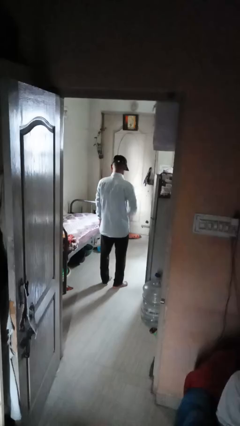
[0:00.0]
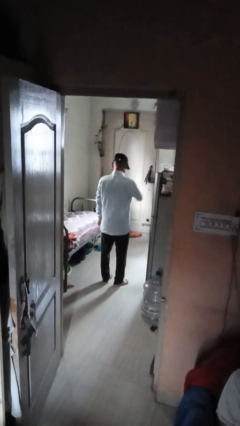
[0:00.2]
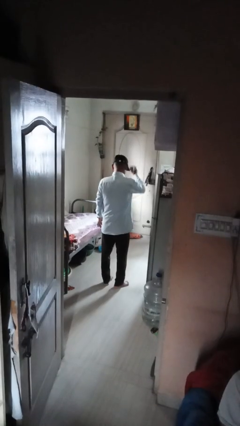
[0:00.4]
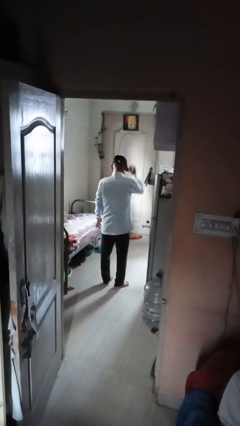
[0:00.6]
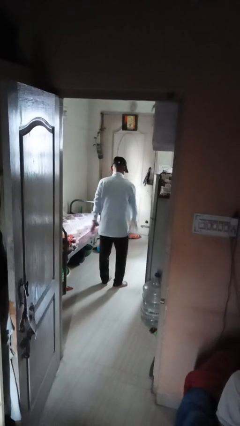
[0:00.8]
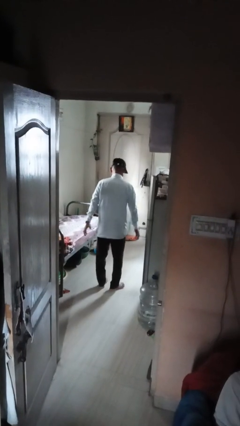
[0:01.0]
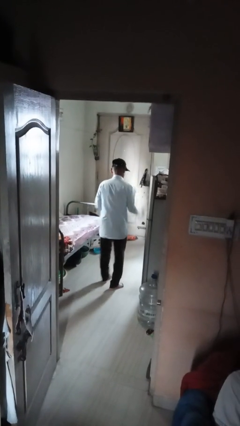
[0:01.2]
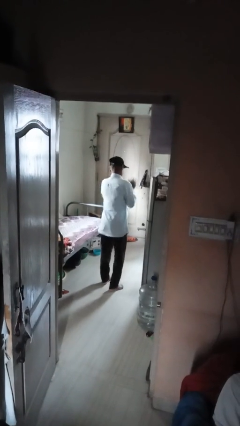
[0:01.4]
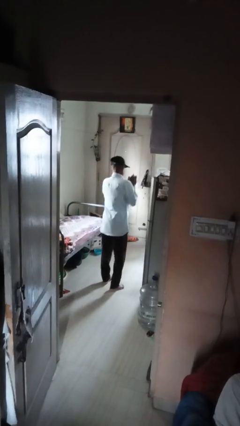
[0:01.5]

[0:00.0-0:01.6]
person bounces ball on floor

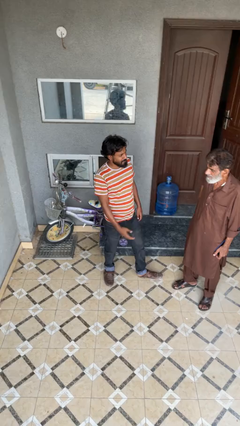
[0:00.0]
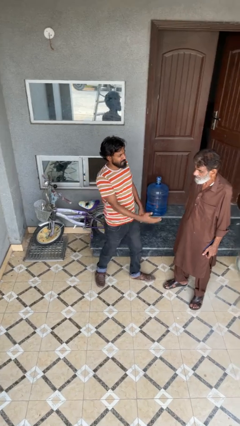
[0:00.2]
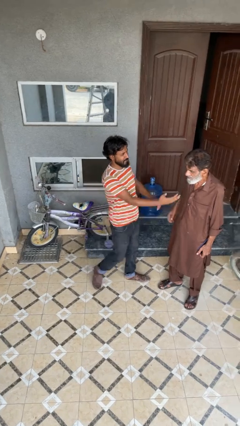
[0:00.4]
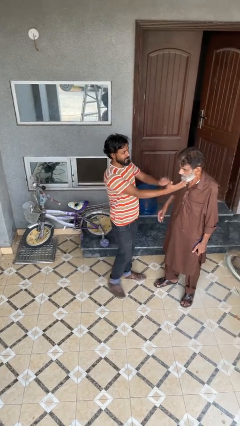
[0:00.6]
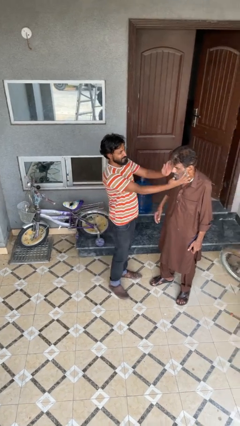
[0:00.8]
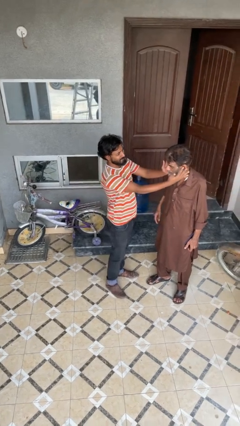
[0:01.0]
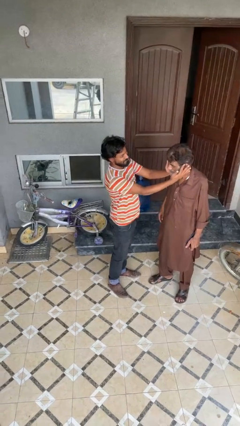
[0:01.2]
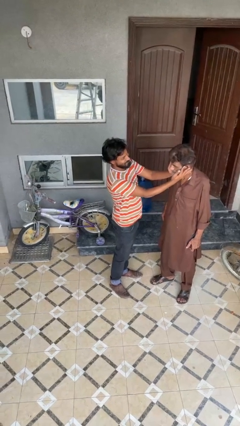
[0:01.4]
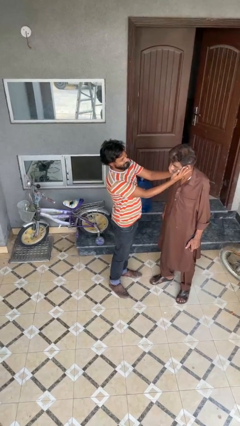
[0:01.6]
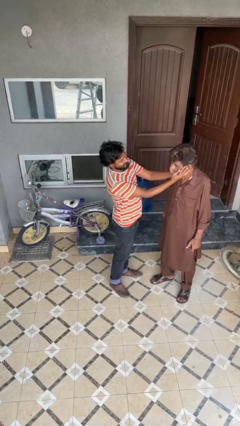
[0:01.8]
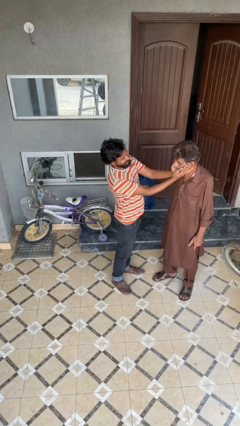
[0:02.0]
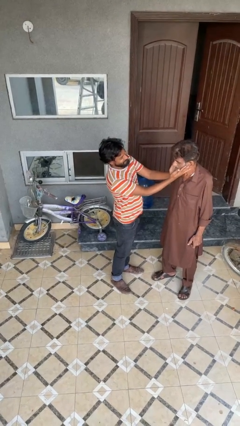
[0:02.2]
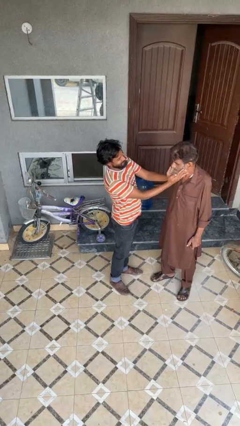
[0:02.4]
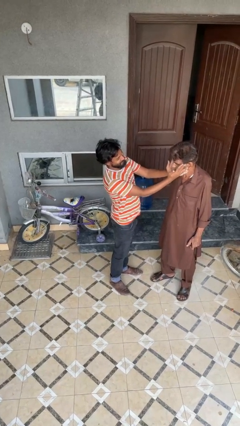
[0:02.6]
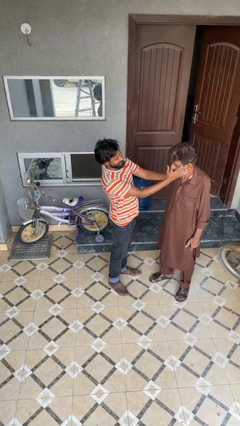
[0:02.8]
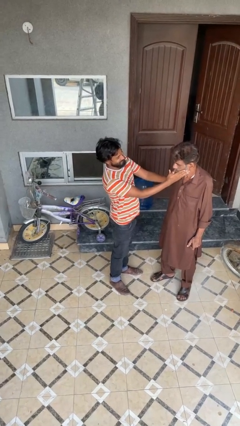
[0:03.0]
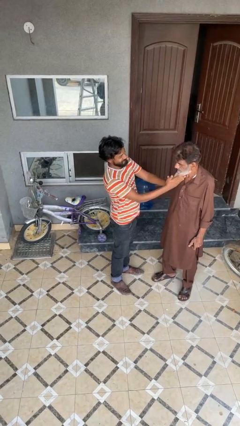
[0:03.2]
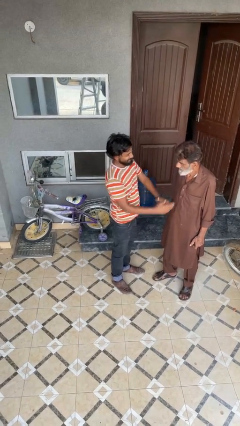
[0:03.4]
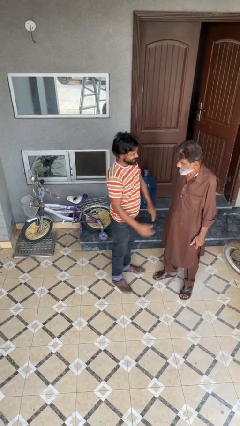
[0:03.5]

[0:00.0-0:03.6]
person touches face of person

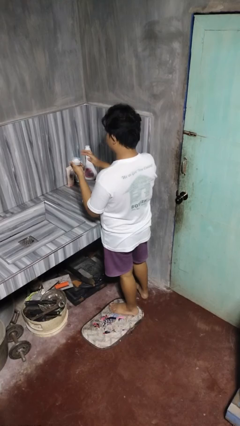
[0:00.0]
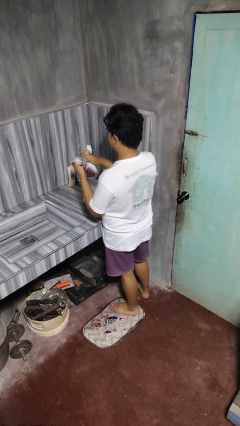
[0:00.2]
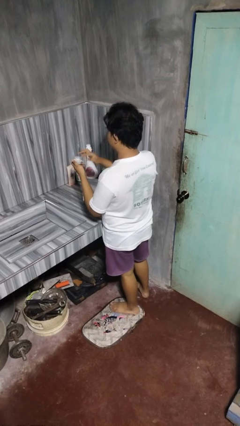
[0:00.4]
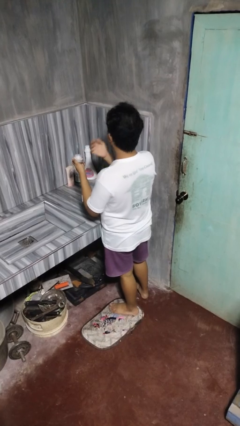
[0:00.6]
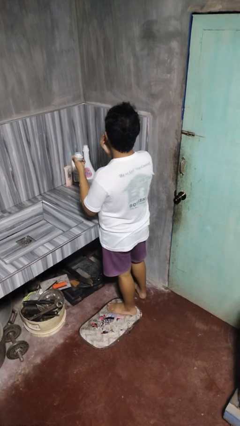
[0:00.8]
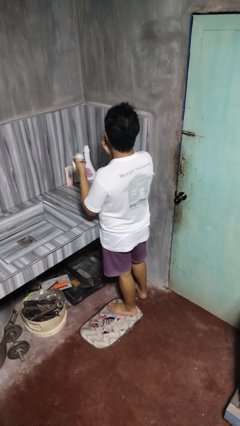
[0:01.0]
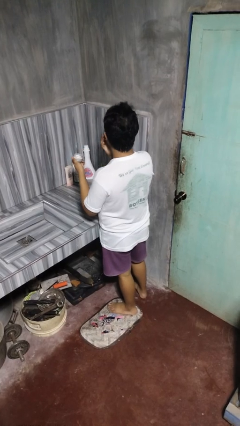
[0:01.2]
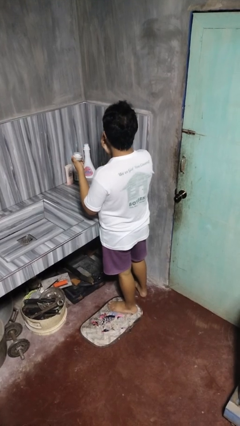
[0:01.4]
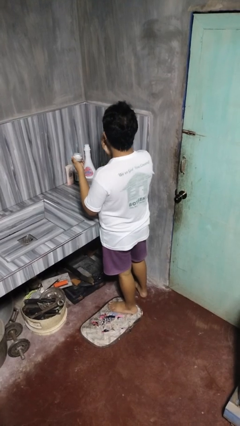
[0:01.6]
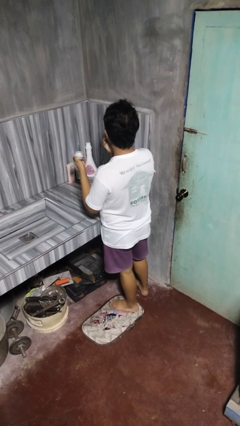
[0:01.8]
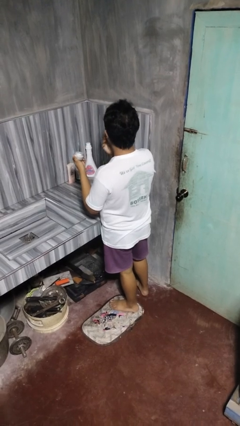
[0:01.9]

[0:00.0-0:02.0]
person applies facial moisturizer

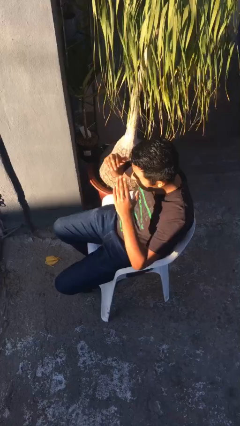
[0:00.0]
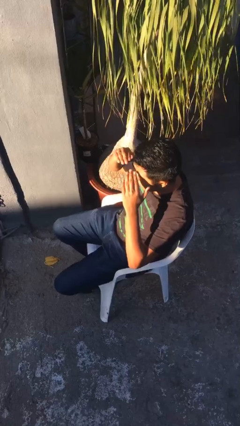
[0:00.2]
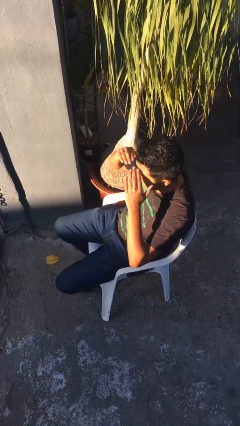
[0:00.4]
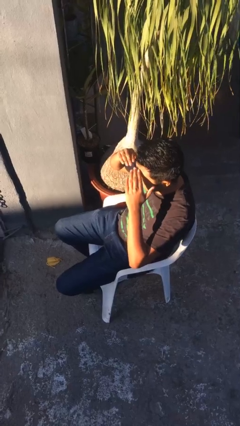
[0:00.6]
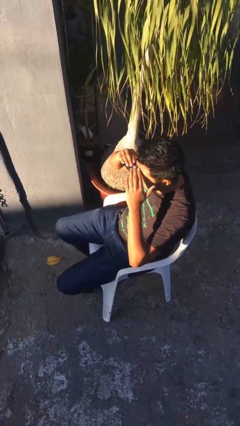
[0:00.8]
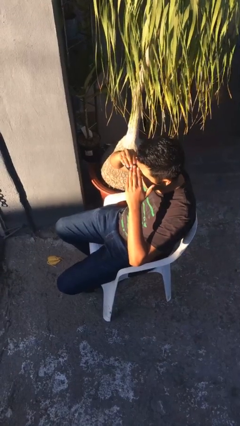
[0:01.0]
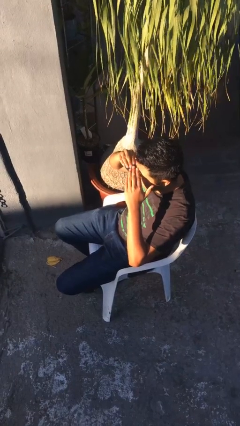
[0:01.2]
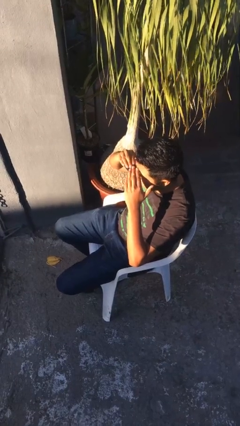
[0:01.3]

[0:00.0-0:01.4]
person shades eyes

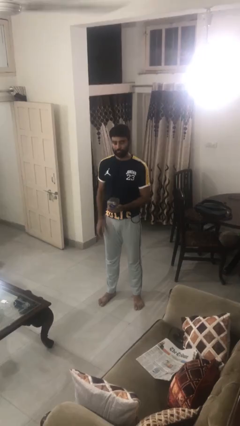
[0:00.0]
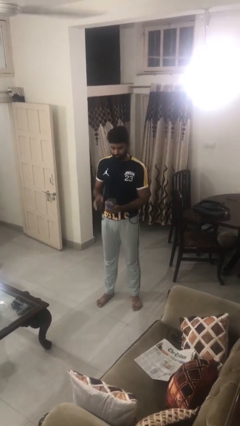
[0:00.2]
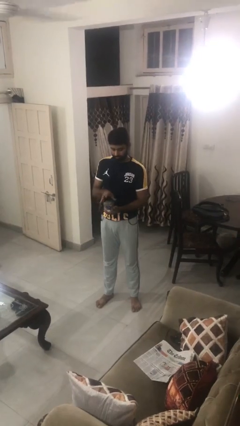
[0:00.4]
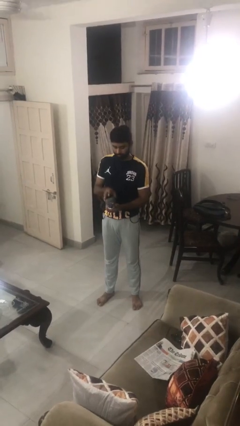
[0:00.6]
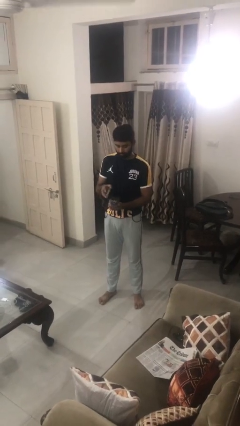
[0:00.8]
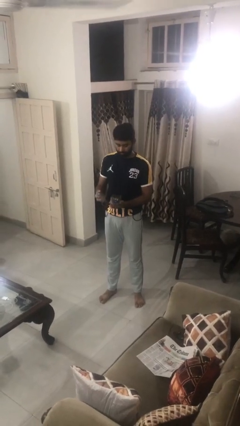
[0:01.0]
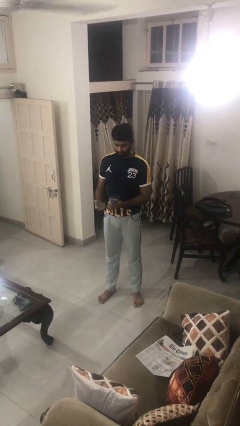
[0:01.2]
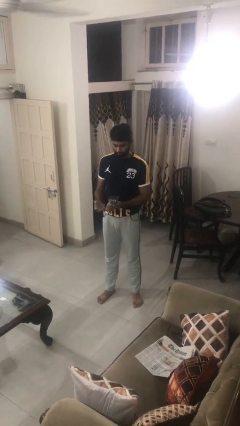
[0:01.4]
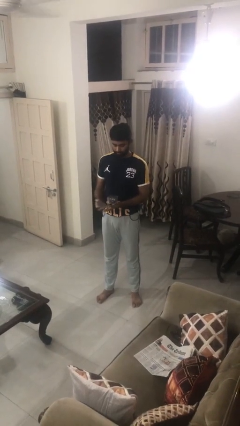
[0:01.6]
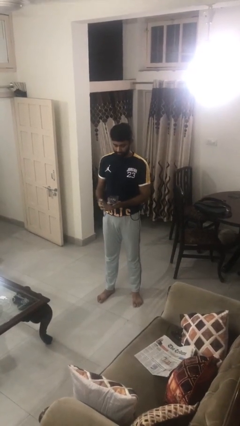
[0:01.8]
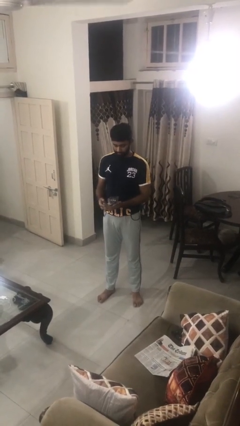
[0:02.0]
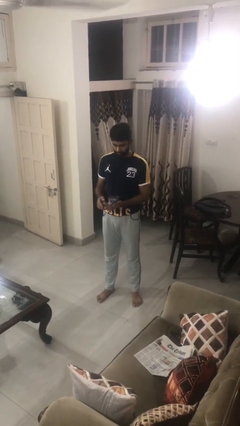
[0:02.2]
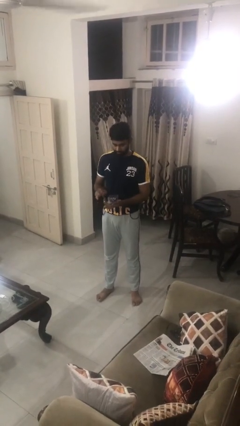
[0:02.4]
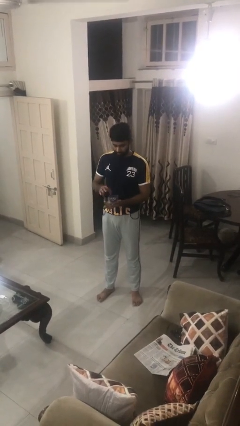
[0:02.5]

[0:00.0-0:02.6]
person opens jewelry box

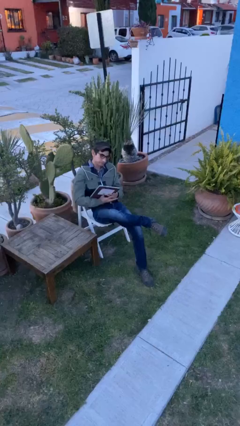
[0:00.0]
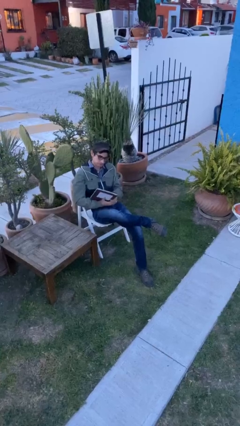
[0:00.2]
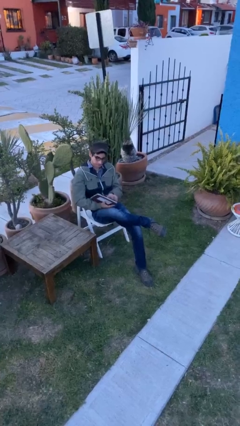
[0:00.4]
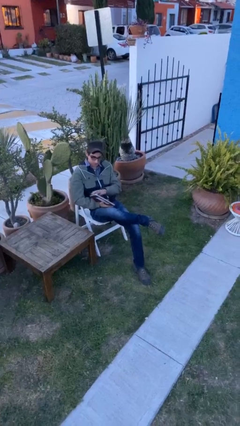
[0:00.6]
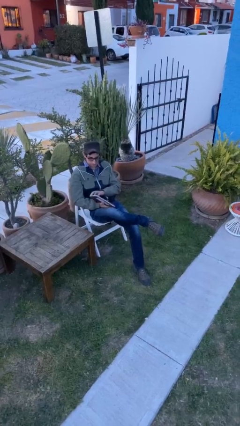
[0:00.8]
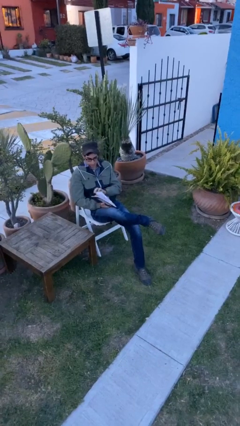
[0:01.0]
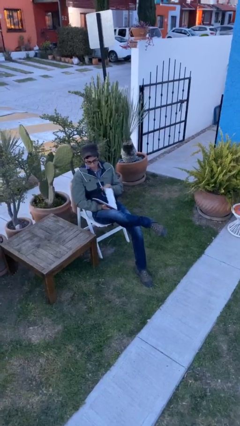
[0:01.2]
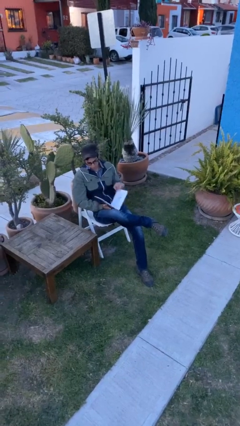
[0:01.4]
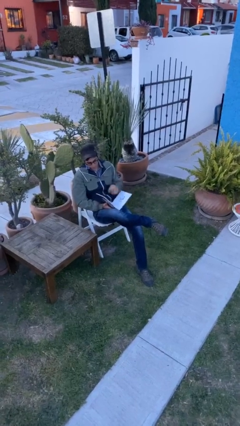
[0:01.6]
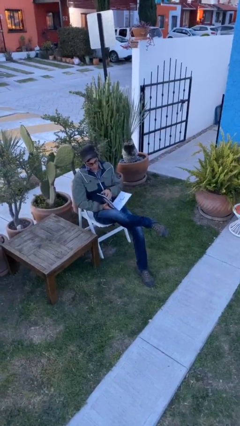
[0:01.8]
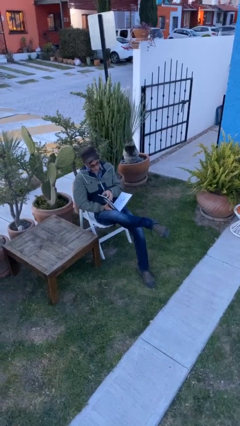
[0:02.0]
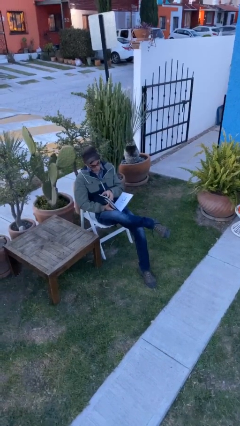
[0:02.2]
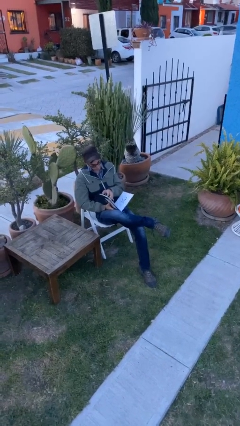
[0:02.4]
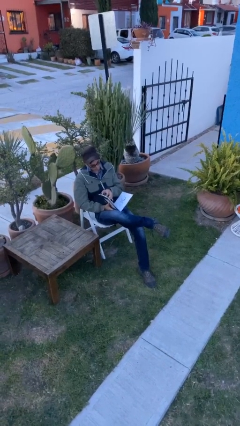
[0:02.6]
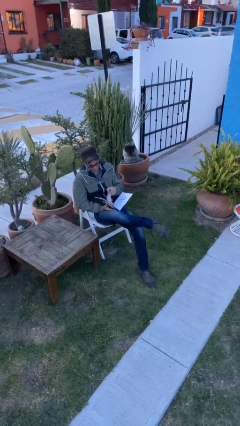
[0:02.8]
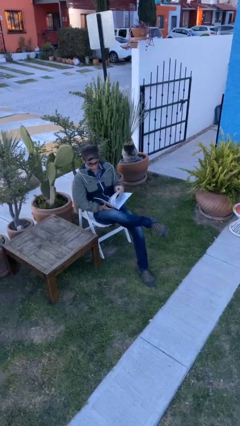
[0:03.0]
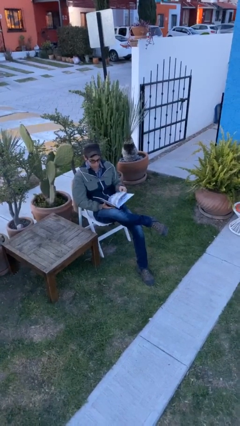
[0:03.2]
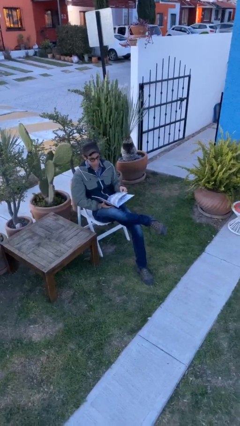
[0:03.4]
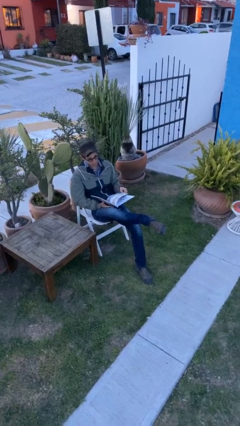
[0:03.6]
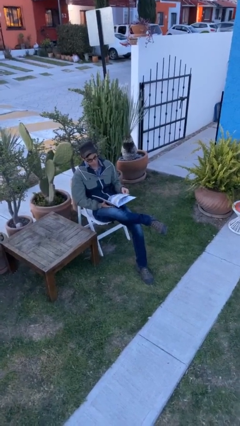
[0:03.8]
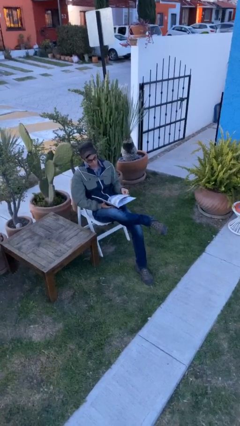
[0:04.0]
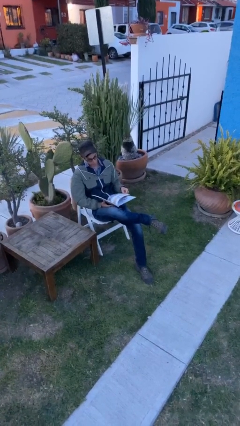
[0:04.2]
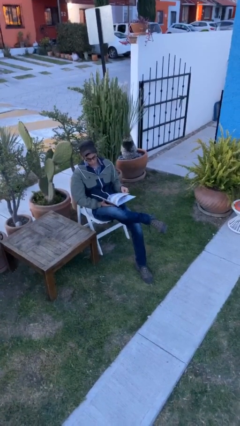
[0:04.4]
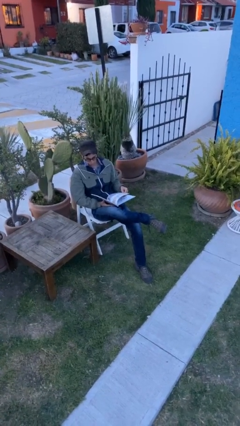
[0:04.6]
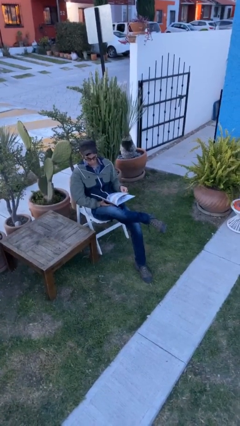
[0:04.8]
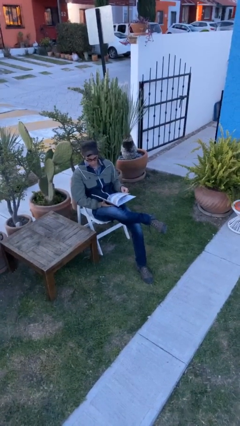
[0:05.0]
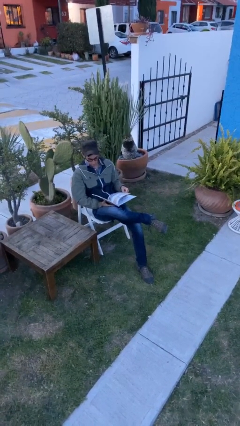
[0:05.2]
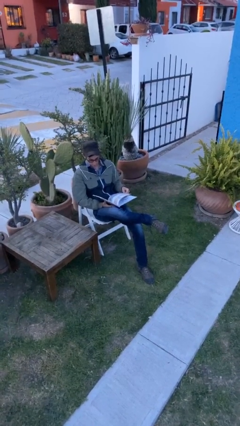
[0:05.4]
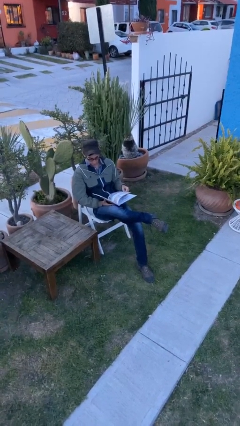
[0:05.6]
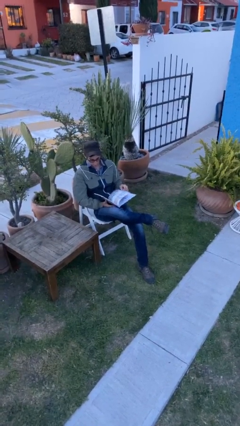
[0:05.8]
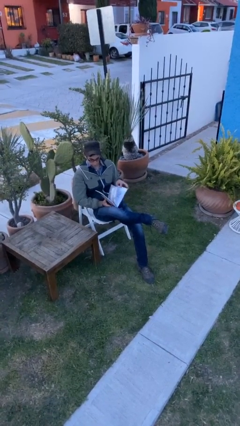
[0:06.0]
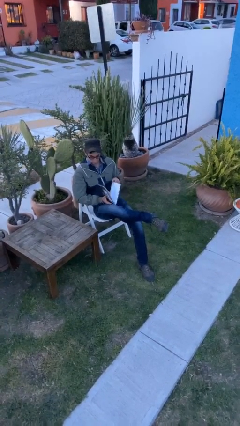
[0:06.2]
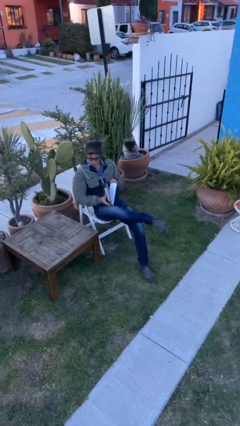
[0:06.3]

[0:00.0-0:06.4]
person reads document
